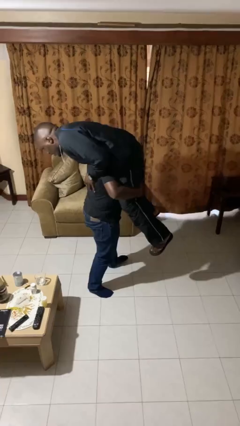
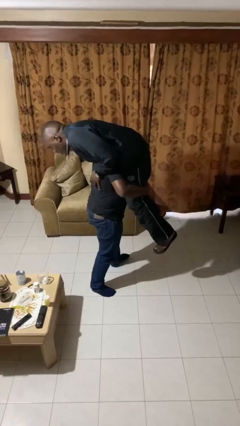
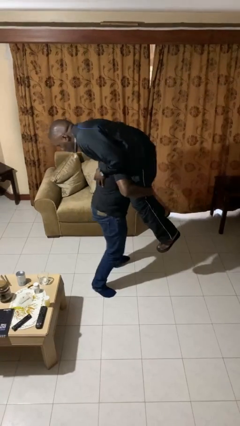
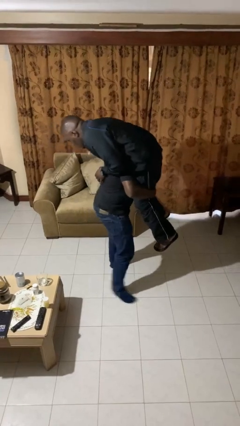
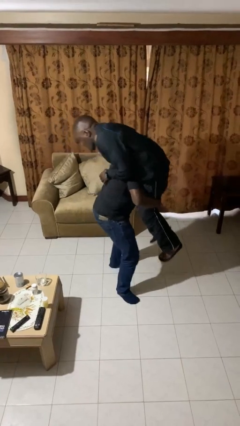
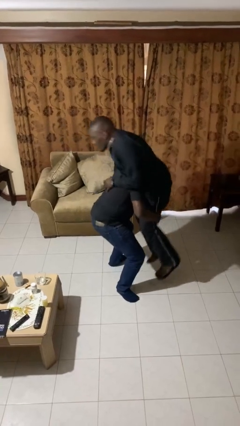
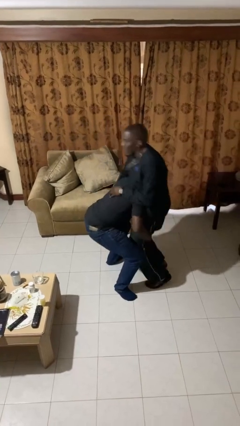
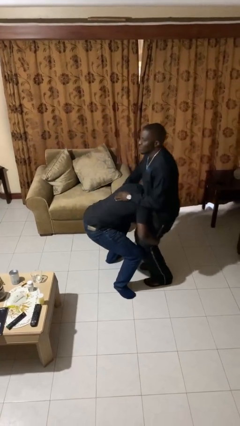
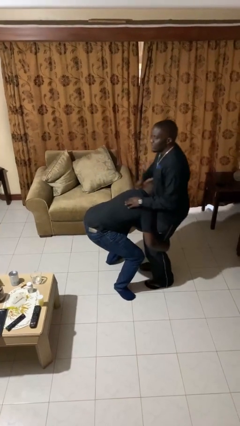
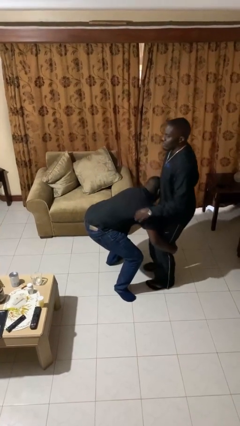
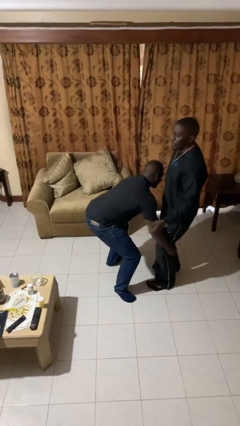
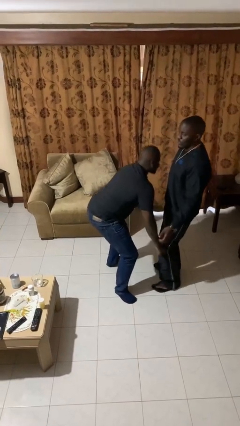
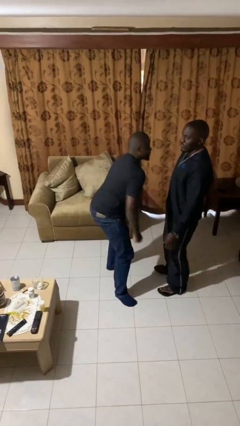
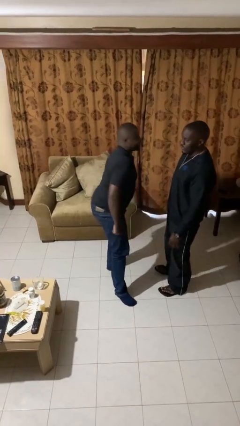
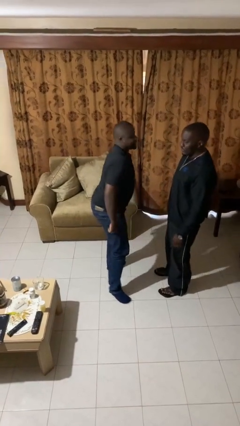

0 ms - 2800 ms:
person puts down person

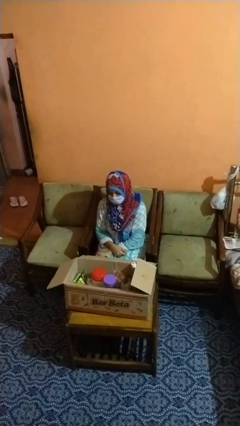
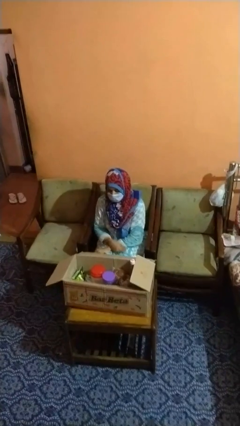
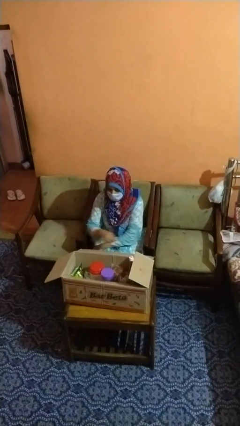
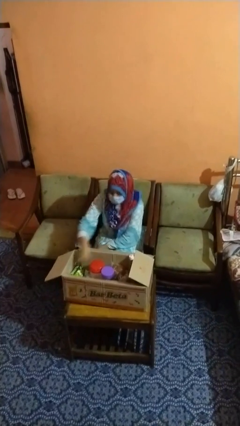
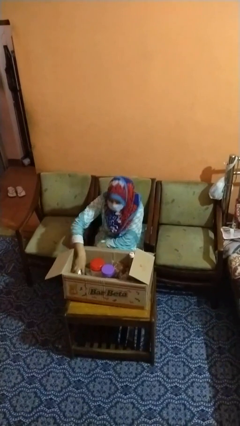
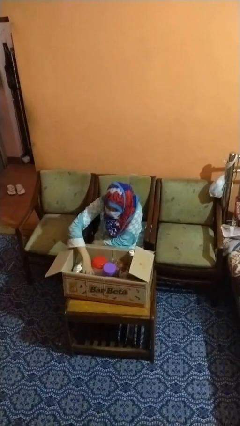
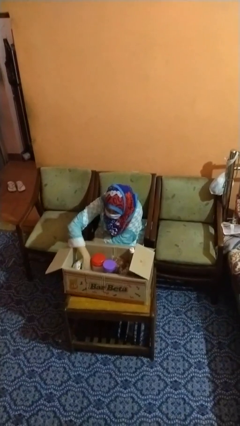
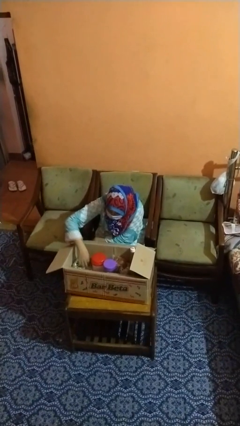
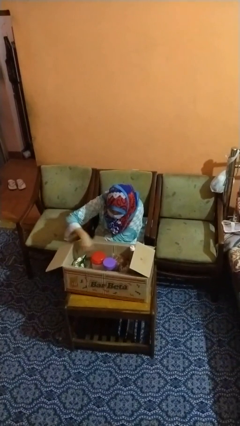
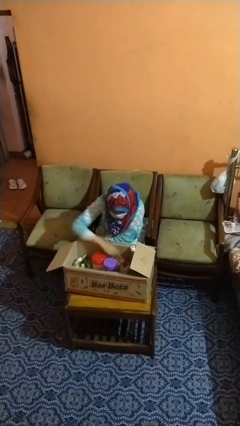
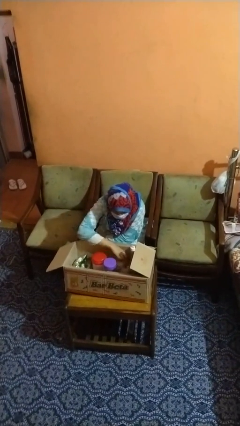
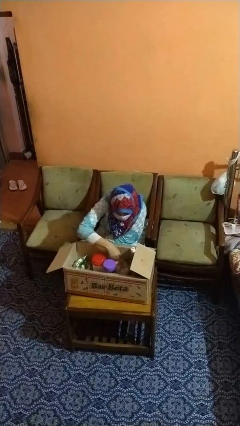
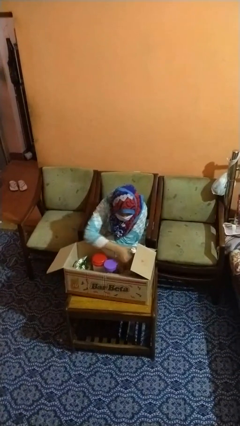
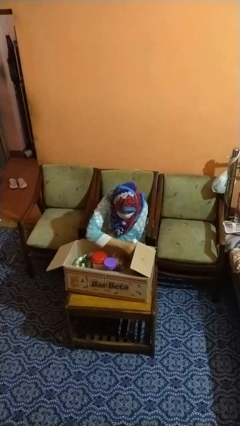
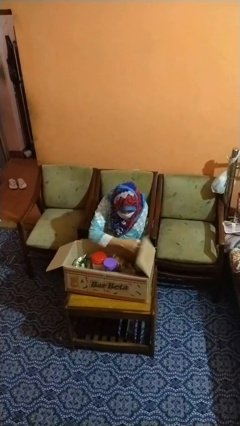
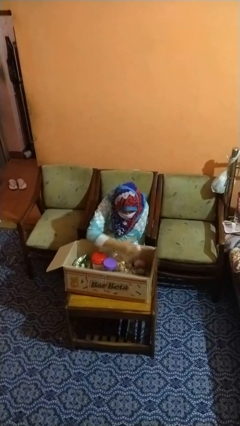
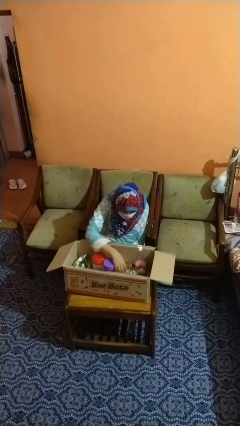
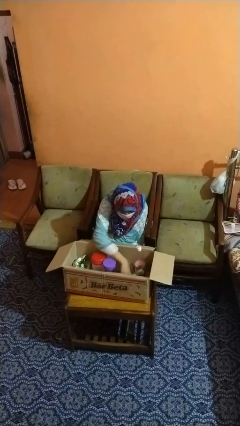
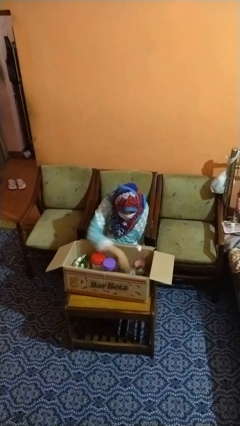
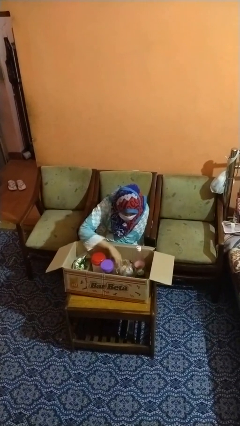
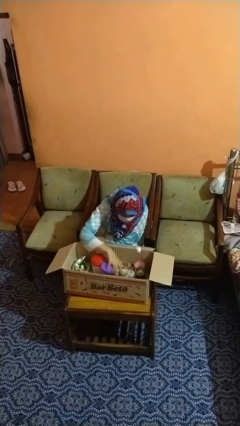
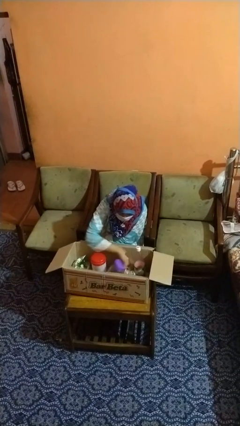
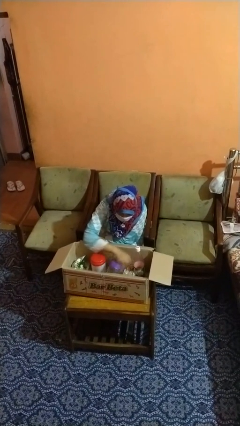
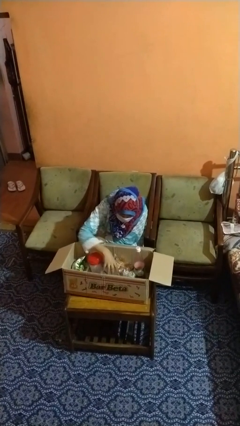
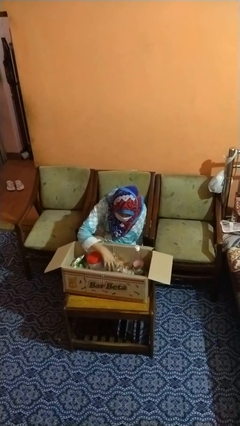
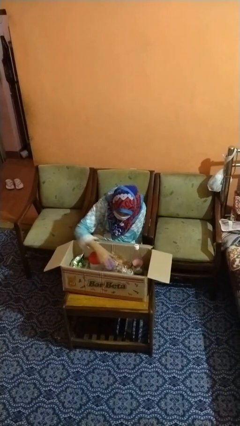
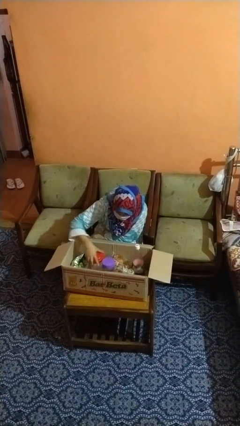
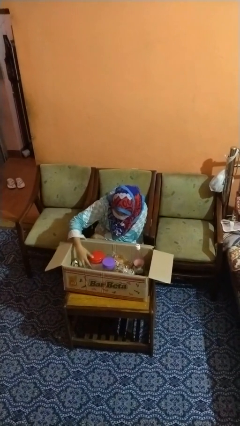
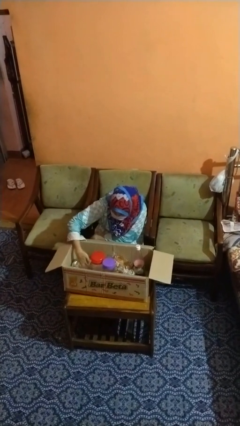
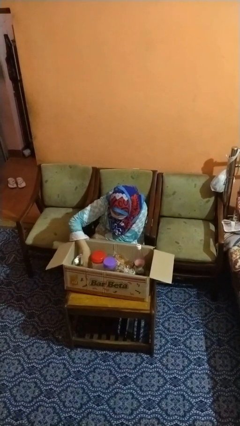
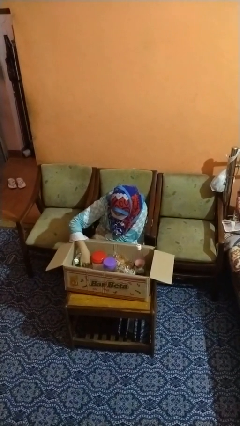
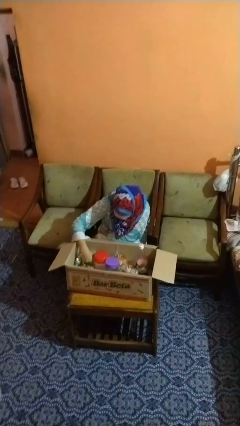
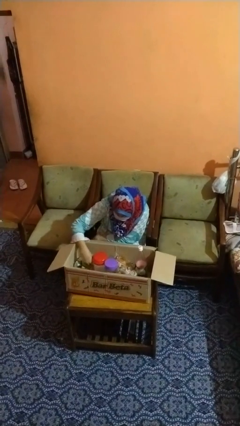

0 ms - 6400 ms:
person searches in box

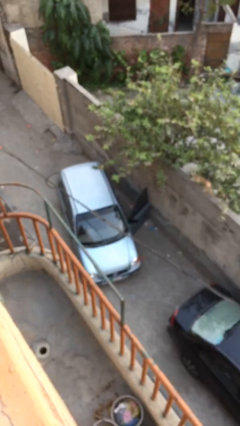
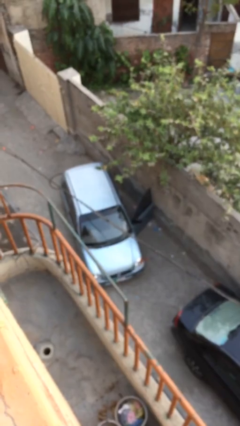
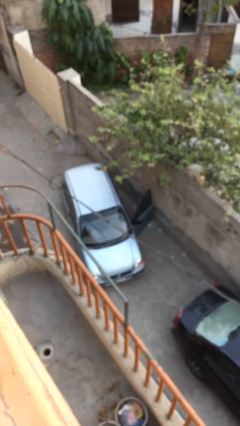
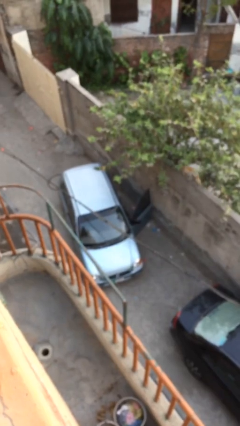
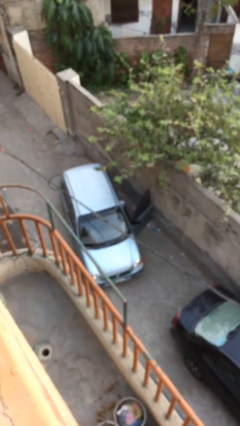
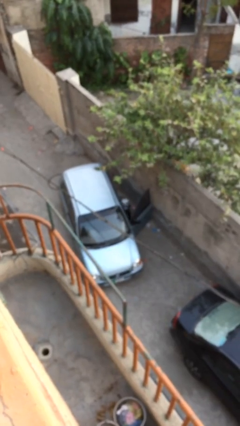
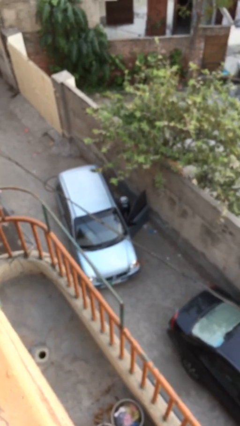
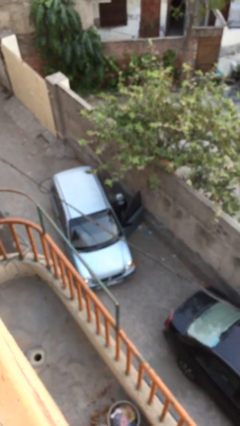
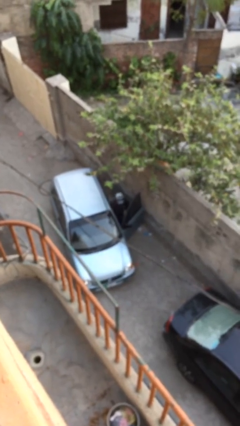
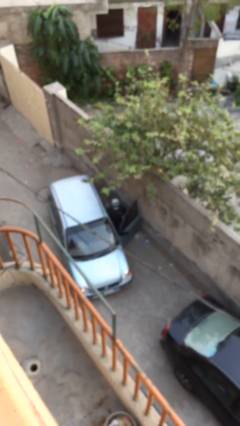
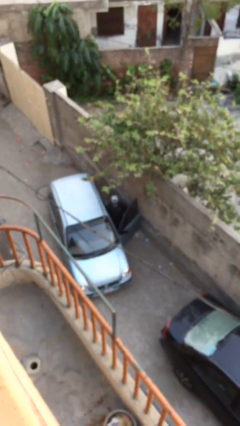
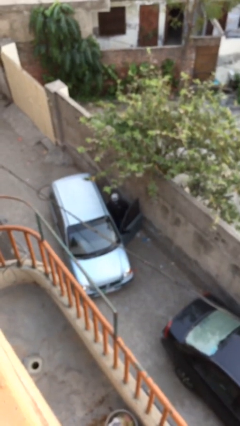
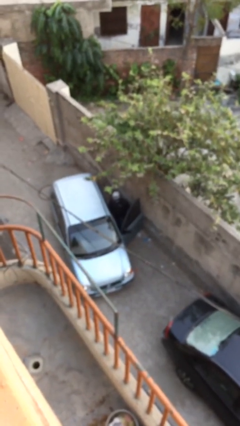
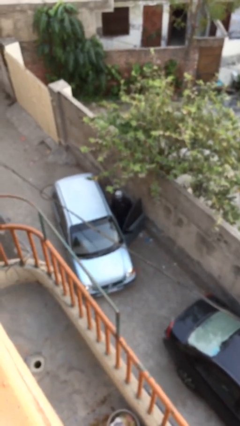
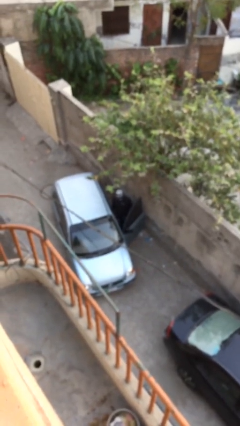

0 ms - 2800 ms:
person exits car

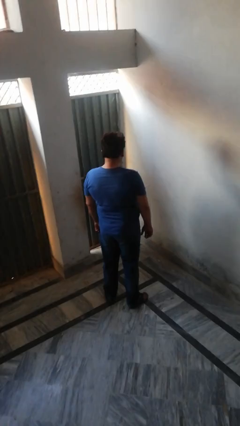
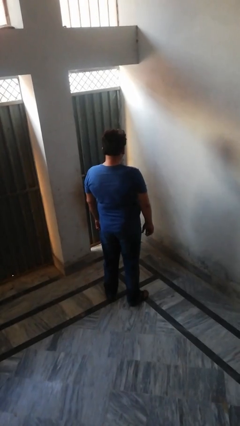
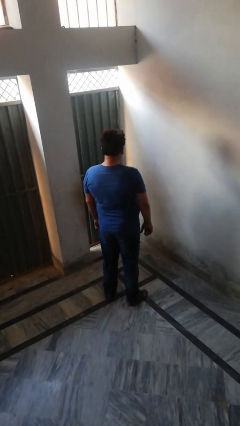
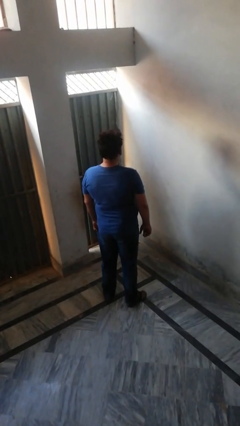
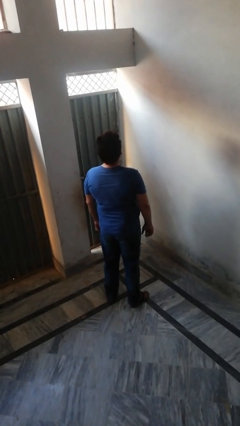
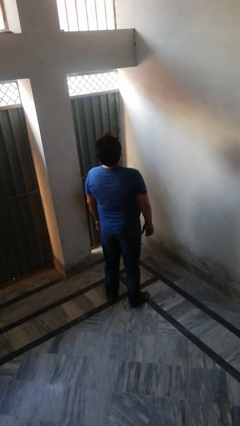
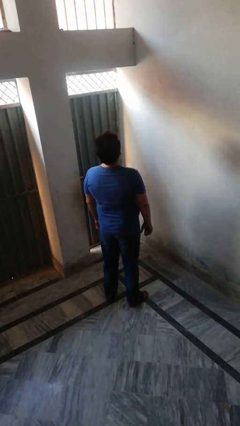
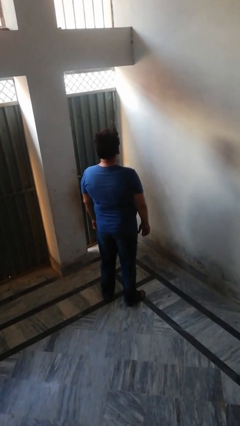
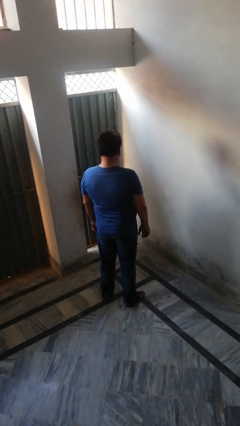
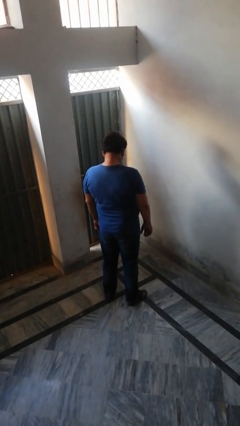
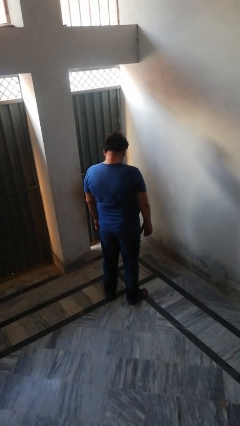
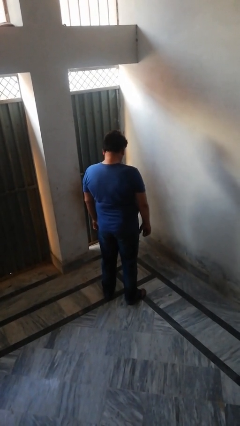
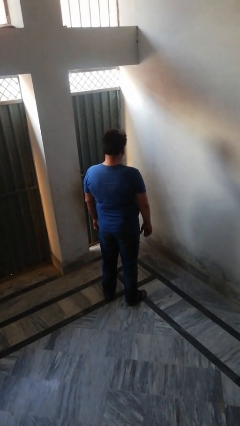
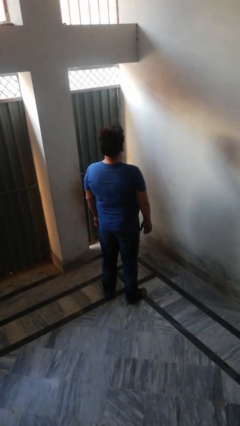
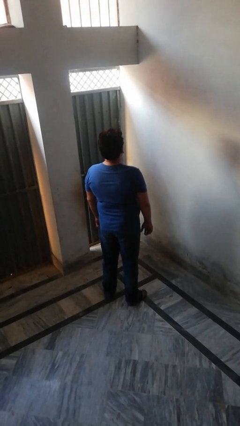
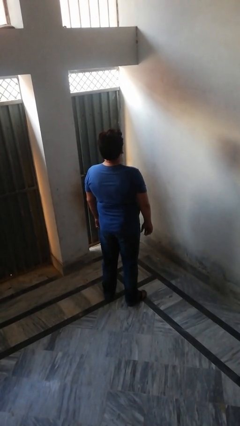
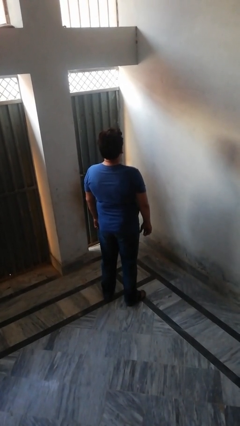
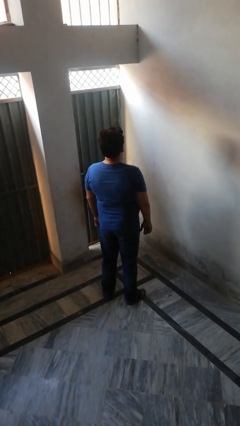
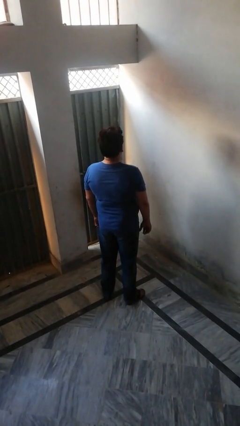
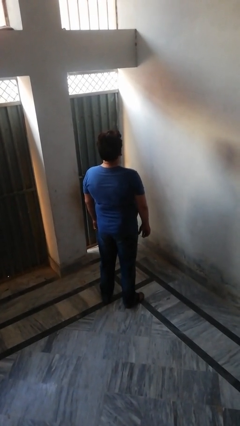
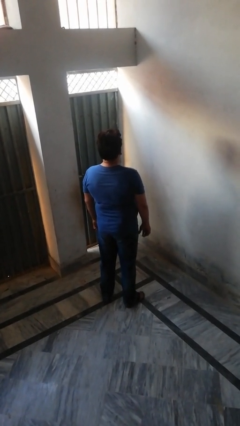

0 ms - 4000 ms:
person nods head

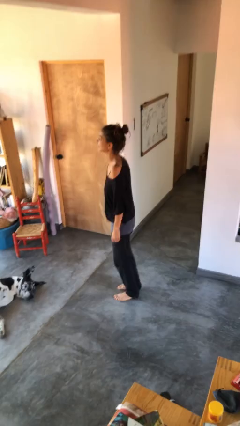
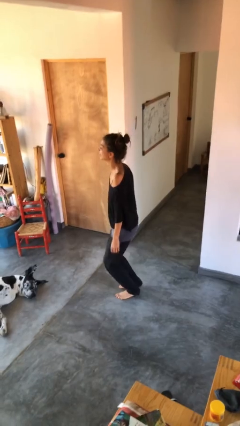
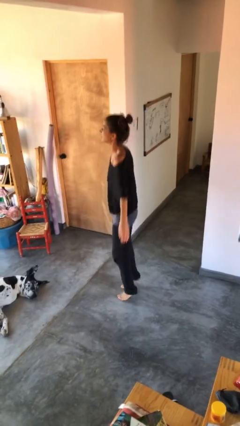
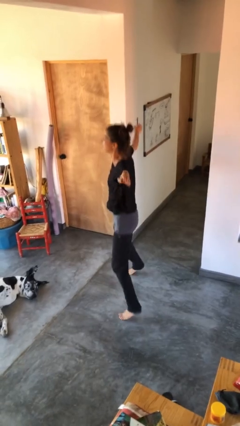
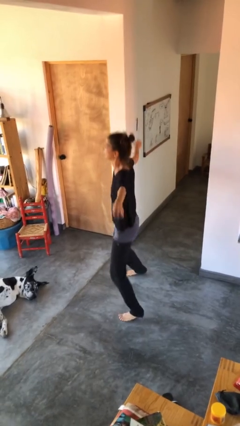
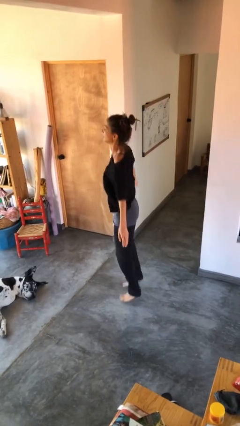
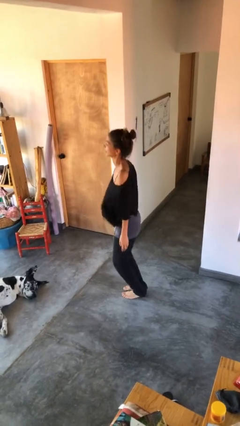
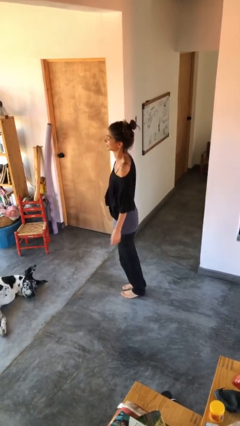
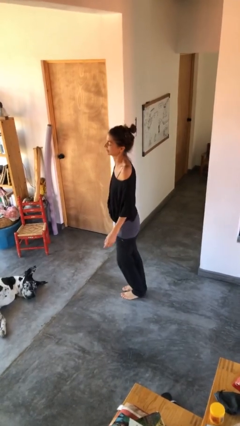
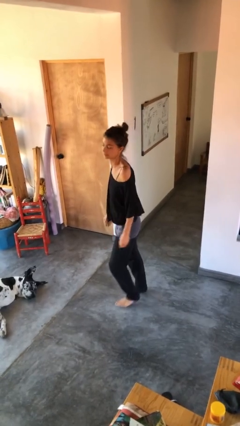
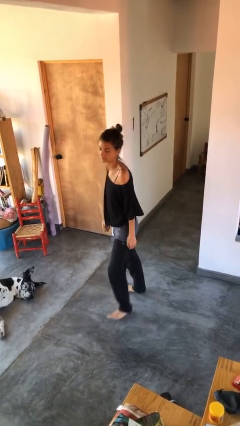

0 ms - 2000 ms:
person exercises with jumping jacks
